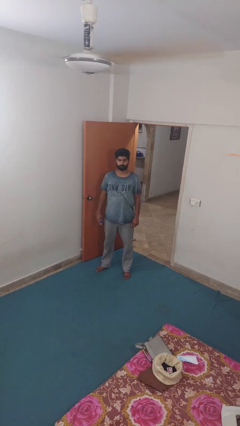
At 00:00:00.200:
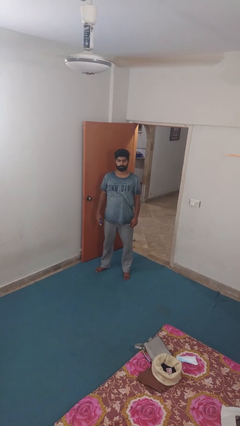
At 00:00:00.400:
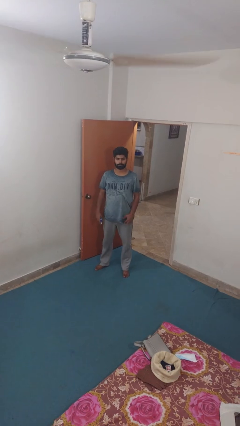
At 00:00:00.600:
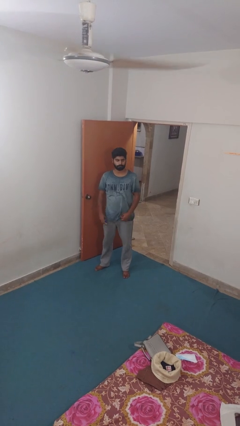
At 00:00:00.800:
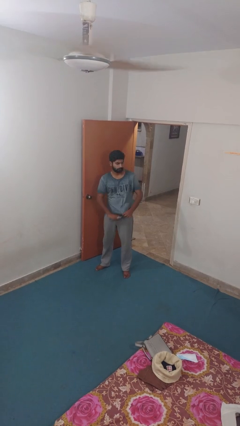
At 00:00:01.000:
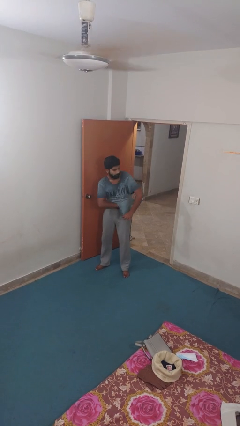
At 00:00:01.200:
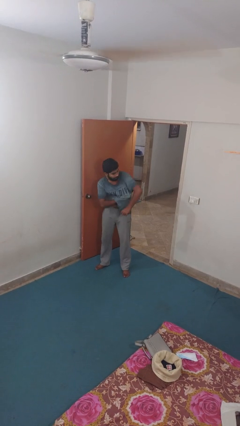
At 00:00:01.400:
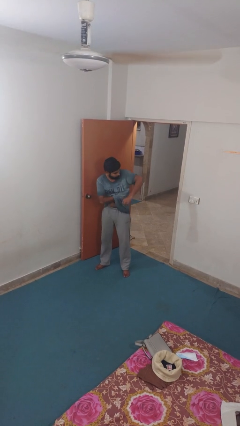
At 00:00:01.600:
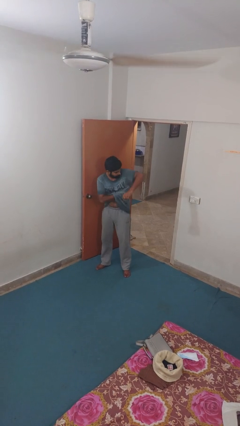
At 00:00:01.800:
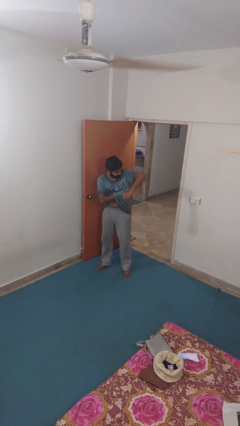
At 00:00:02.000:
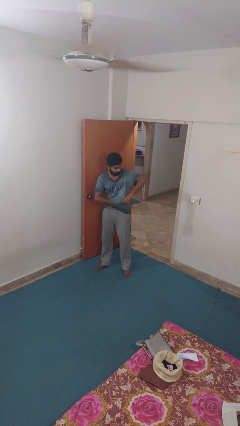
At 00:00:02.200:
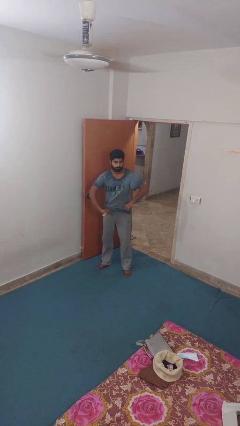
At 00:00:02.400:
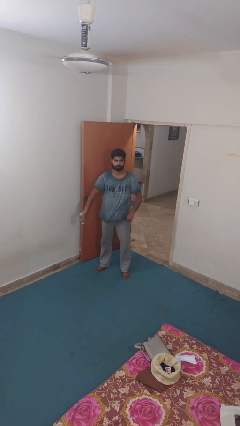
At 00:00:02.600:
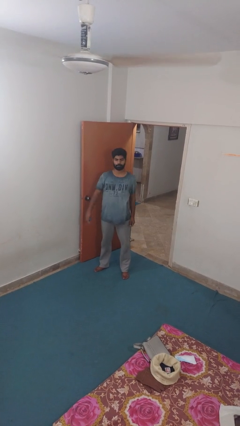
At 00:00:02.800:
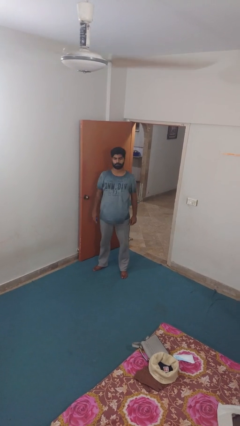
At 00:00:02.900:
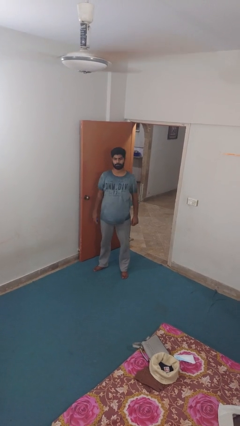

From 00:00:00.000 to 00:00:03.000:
person applies deodorant

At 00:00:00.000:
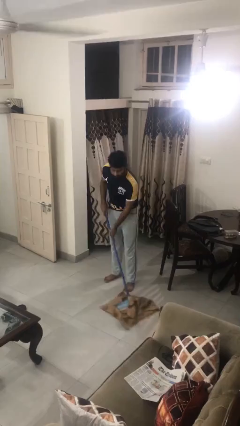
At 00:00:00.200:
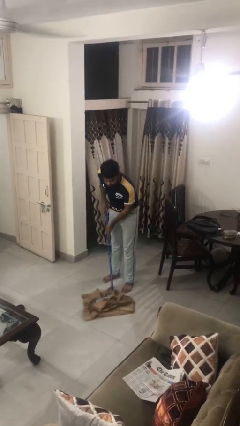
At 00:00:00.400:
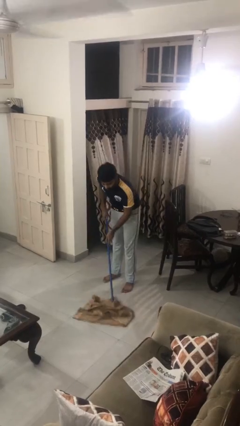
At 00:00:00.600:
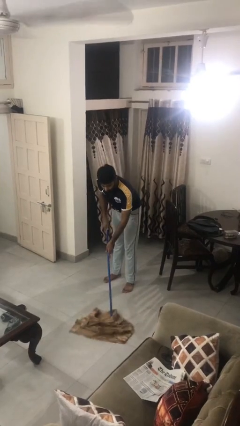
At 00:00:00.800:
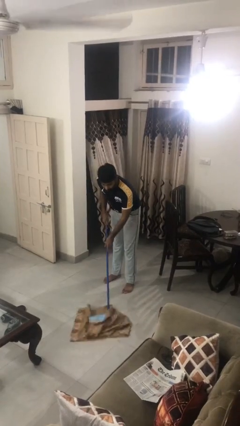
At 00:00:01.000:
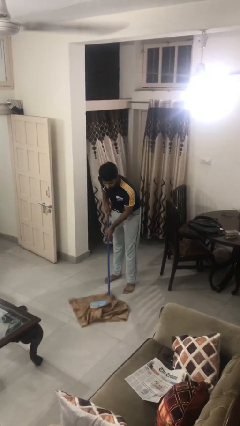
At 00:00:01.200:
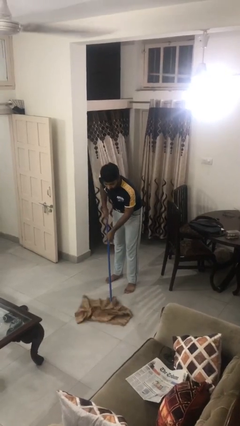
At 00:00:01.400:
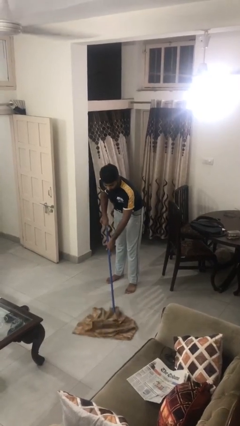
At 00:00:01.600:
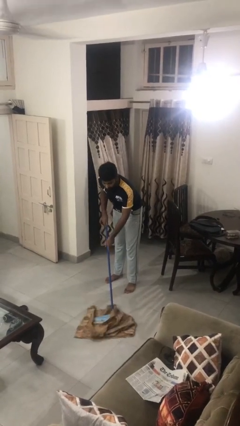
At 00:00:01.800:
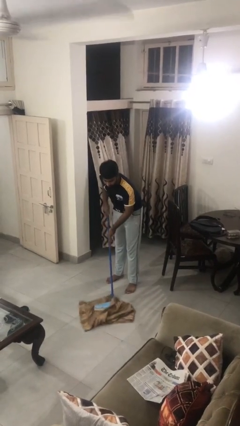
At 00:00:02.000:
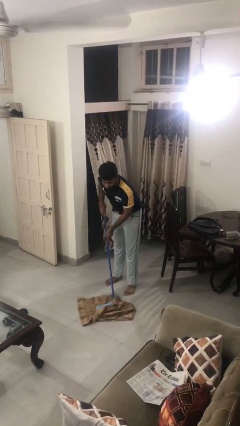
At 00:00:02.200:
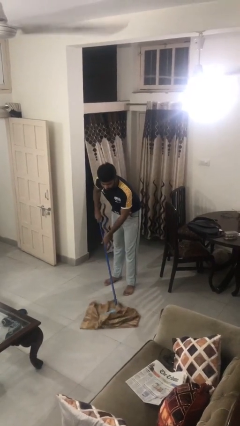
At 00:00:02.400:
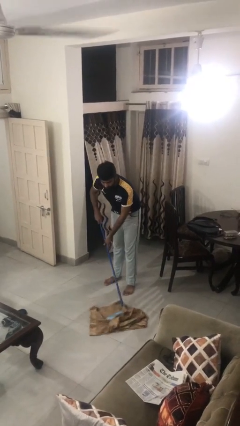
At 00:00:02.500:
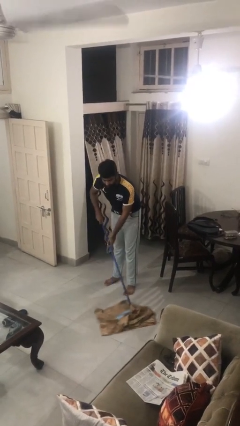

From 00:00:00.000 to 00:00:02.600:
person mops

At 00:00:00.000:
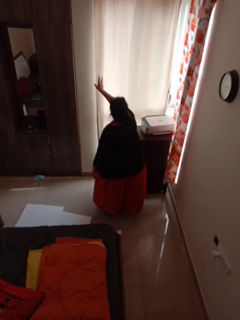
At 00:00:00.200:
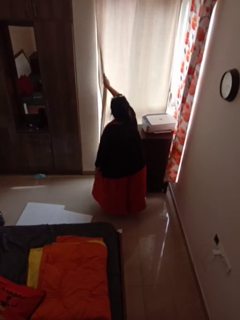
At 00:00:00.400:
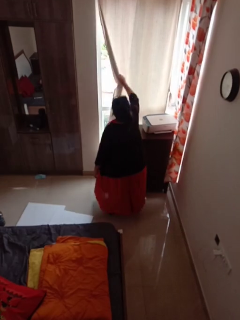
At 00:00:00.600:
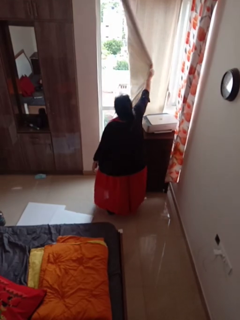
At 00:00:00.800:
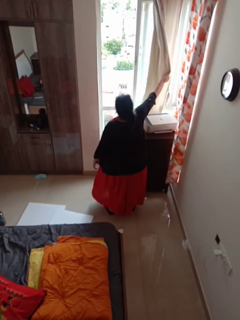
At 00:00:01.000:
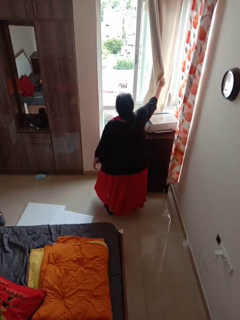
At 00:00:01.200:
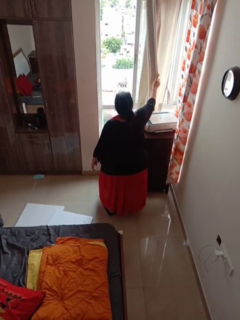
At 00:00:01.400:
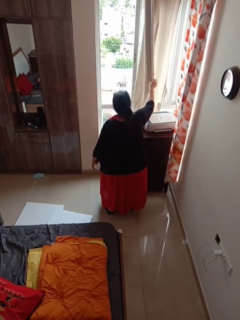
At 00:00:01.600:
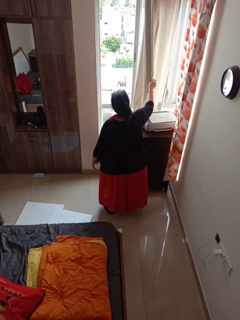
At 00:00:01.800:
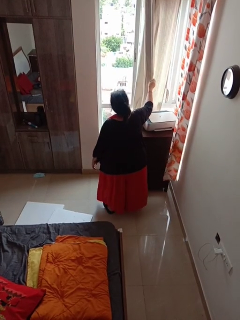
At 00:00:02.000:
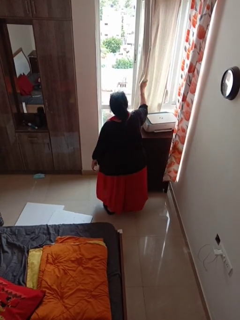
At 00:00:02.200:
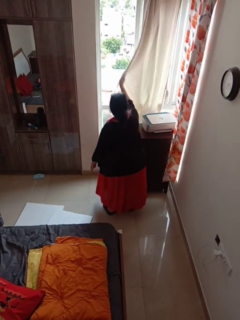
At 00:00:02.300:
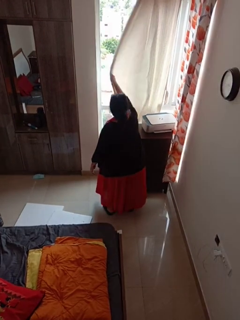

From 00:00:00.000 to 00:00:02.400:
person opens curtains

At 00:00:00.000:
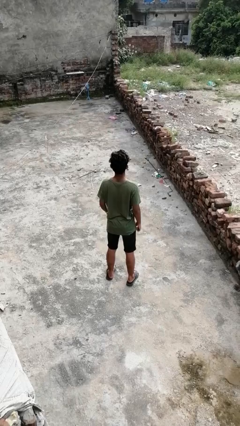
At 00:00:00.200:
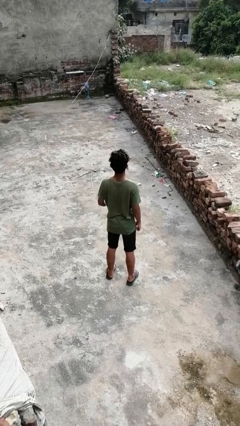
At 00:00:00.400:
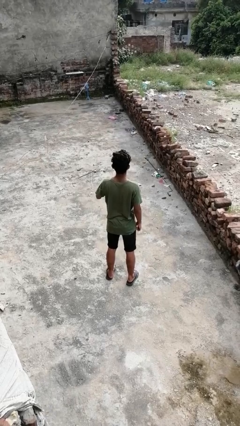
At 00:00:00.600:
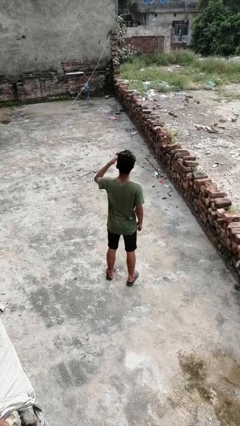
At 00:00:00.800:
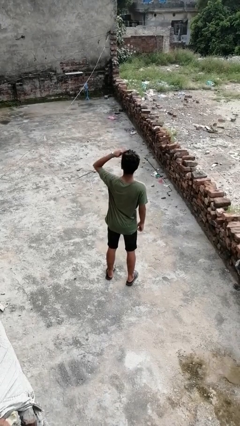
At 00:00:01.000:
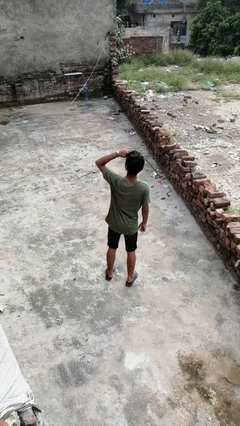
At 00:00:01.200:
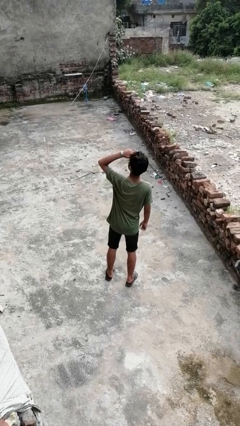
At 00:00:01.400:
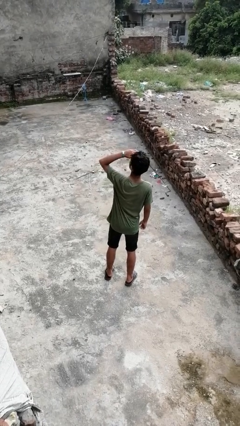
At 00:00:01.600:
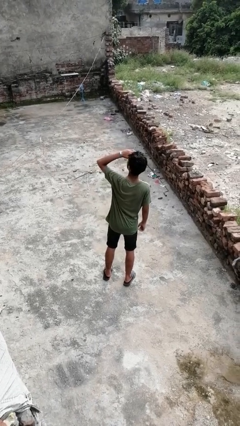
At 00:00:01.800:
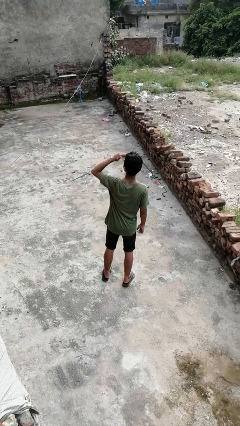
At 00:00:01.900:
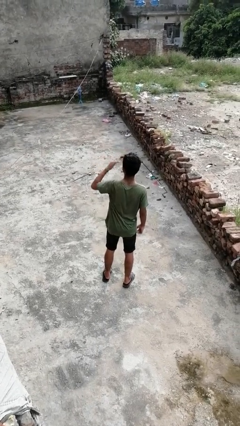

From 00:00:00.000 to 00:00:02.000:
person shades eyes

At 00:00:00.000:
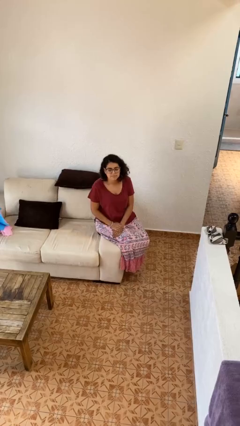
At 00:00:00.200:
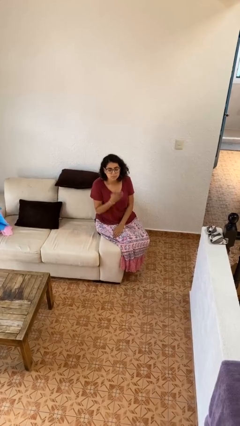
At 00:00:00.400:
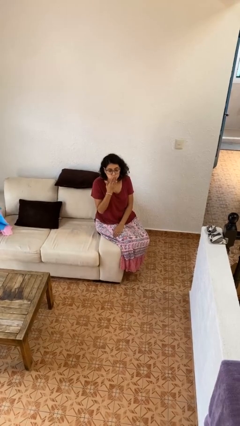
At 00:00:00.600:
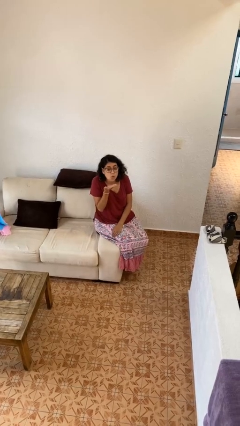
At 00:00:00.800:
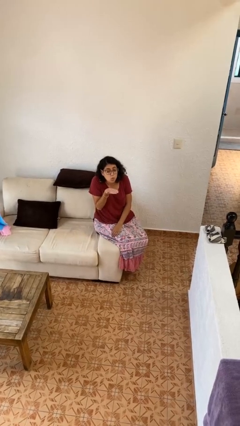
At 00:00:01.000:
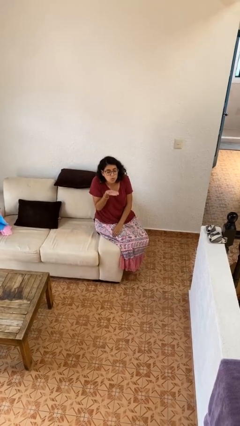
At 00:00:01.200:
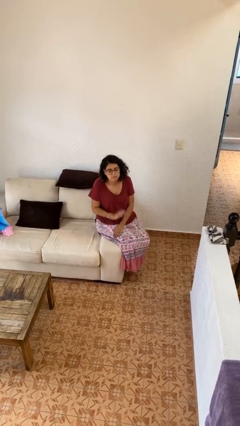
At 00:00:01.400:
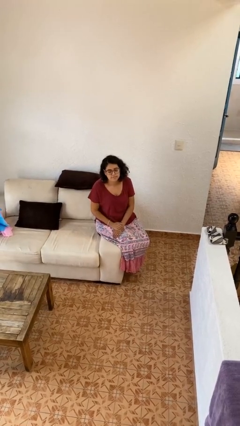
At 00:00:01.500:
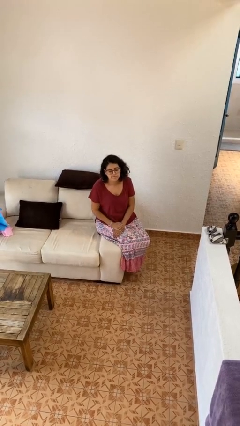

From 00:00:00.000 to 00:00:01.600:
person gestures blow kiss

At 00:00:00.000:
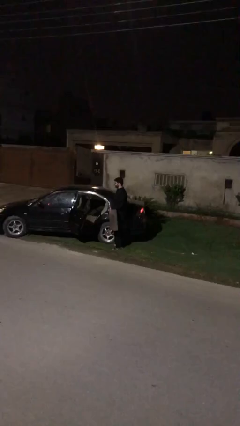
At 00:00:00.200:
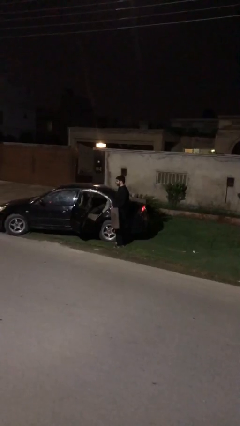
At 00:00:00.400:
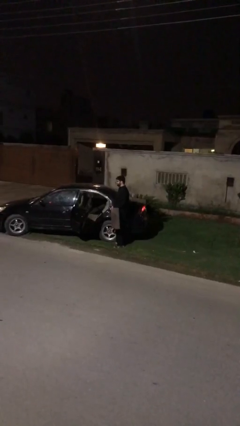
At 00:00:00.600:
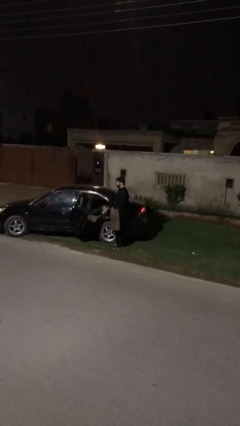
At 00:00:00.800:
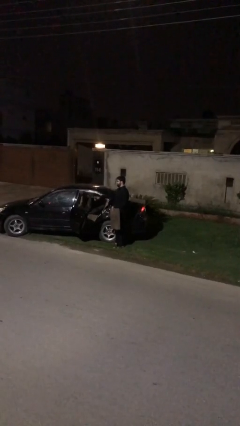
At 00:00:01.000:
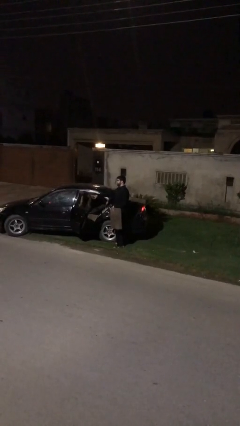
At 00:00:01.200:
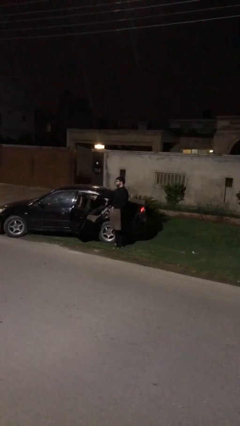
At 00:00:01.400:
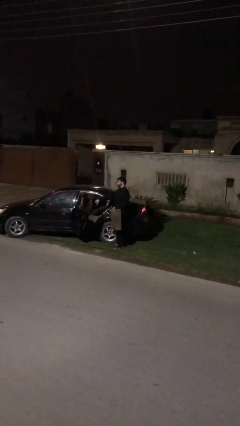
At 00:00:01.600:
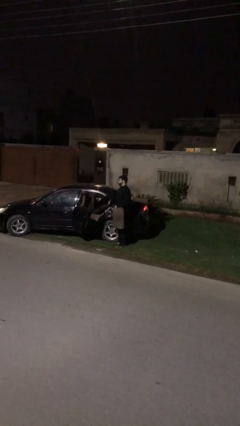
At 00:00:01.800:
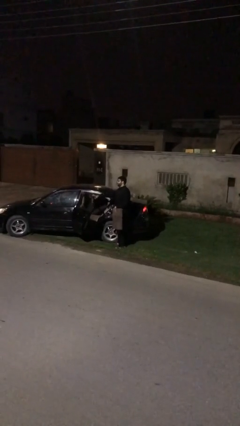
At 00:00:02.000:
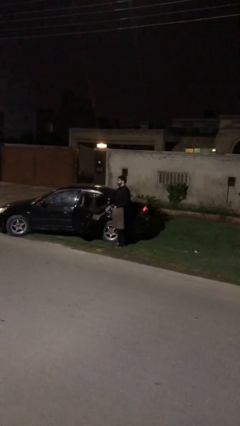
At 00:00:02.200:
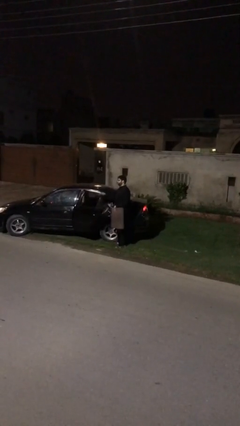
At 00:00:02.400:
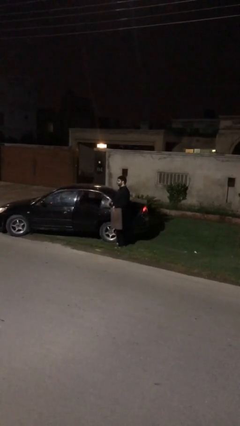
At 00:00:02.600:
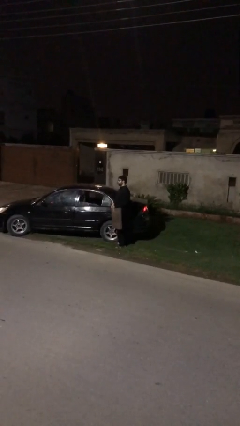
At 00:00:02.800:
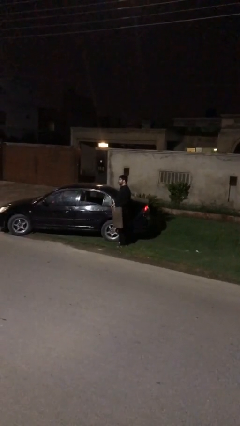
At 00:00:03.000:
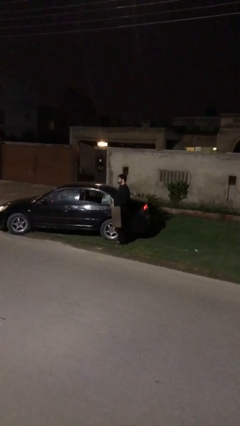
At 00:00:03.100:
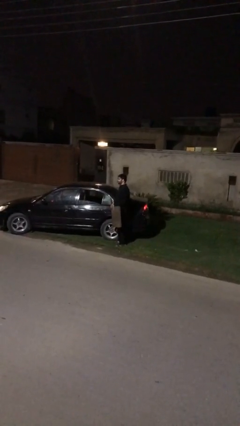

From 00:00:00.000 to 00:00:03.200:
person closes car door

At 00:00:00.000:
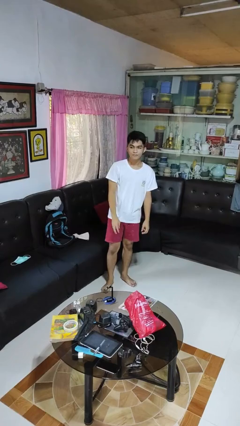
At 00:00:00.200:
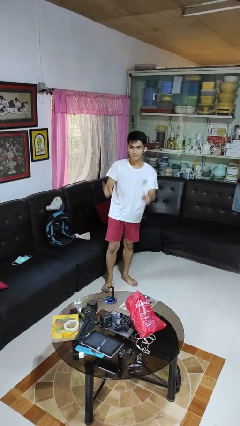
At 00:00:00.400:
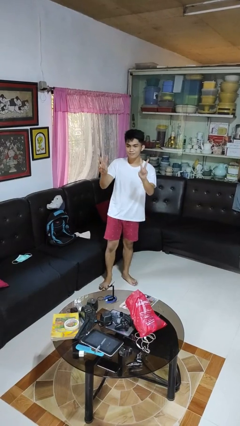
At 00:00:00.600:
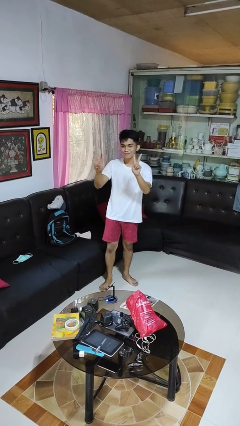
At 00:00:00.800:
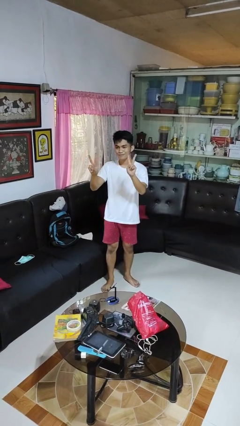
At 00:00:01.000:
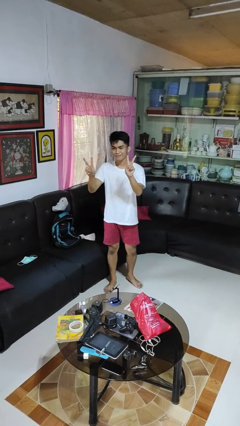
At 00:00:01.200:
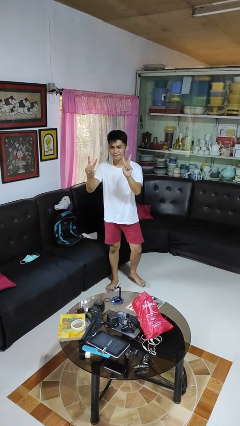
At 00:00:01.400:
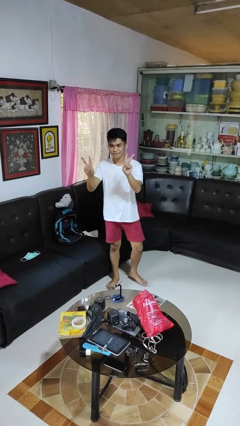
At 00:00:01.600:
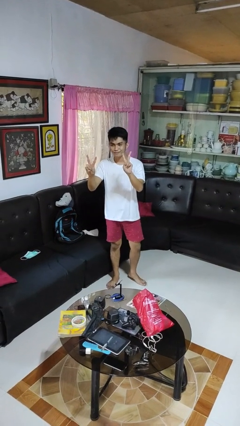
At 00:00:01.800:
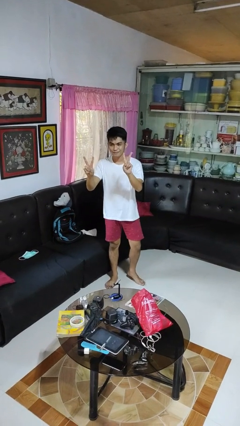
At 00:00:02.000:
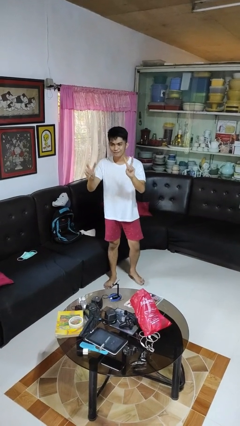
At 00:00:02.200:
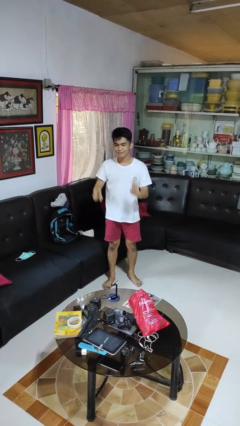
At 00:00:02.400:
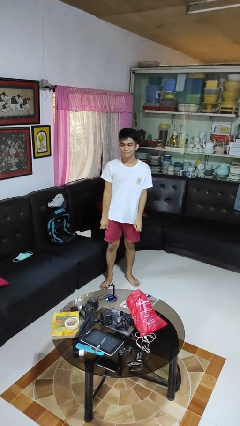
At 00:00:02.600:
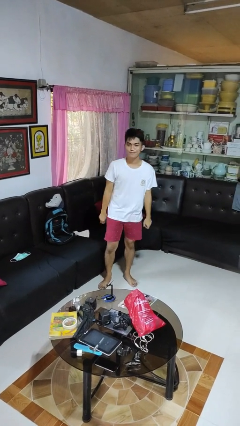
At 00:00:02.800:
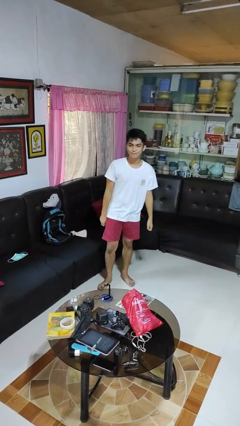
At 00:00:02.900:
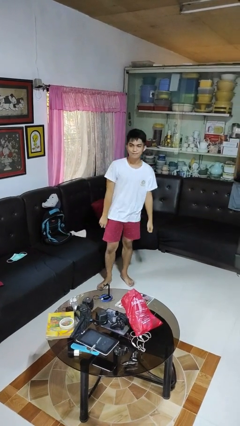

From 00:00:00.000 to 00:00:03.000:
person gestures peace
